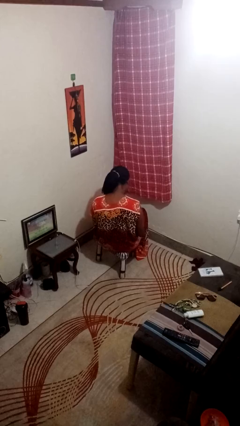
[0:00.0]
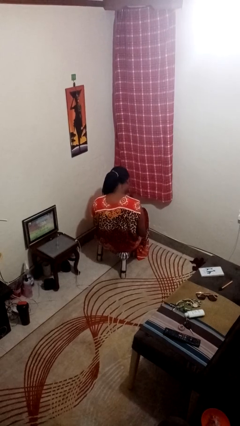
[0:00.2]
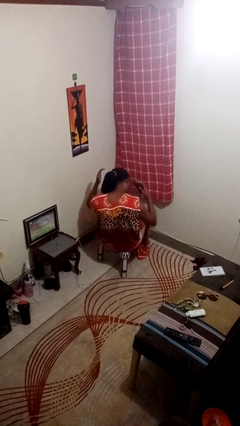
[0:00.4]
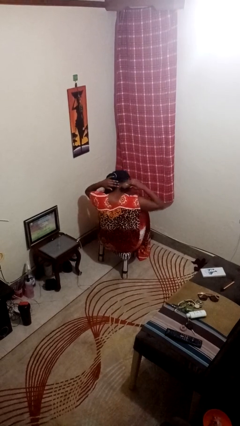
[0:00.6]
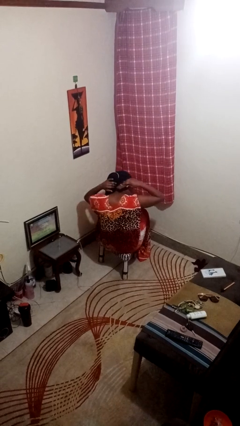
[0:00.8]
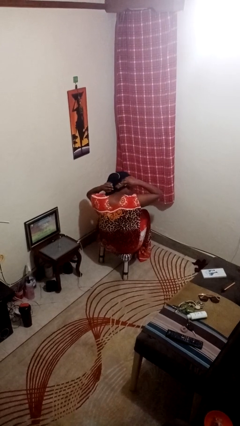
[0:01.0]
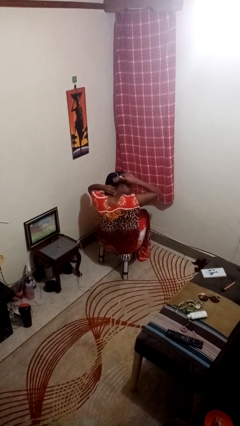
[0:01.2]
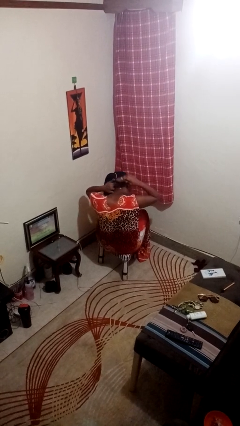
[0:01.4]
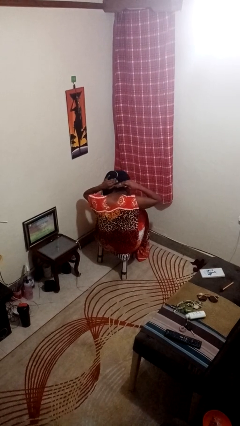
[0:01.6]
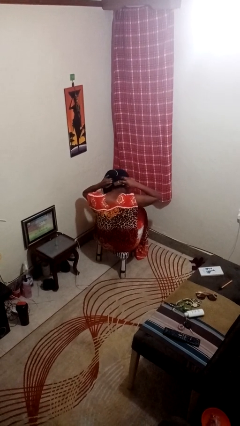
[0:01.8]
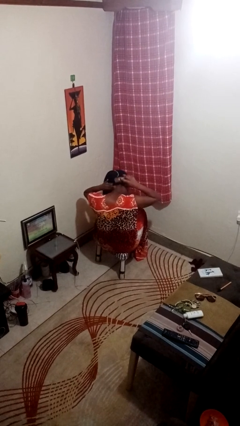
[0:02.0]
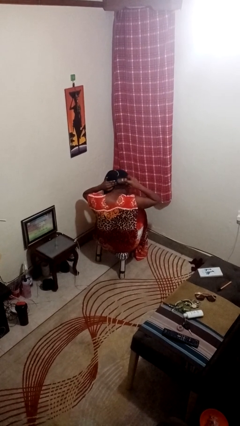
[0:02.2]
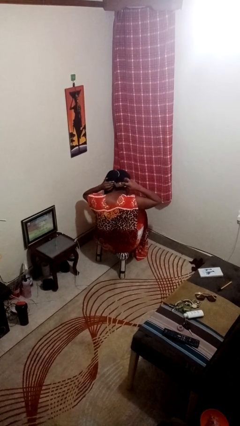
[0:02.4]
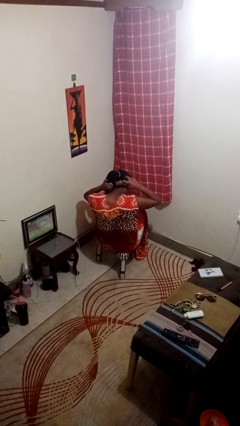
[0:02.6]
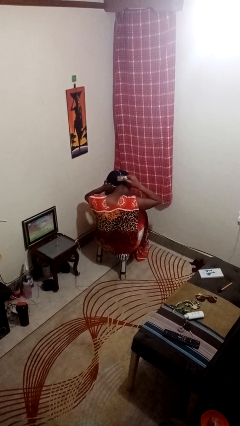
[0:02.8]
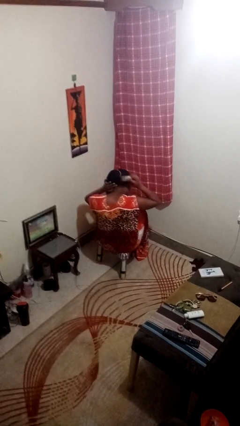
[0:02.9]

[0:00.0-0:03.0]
person brushes hair

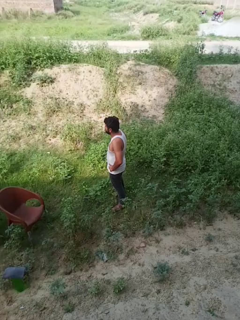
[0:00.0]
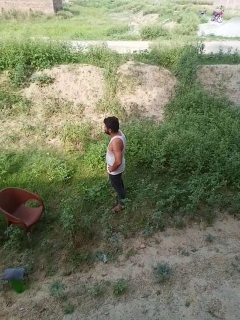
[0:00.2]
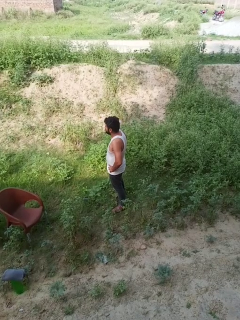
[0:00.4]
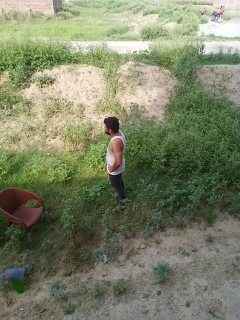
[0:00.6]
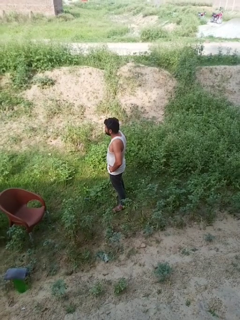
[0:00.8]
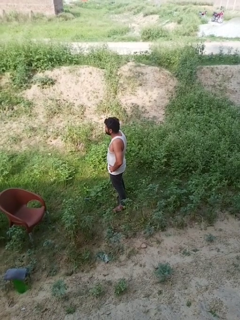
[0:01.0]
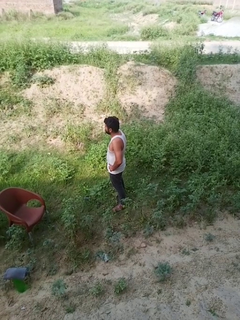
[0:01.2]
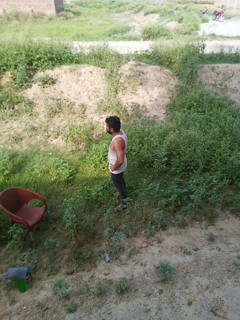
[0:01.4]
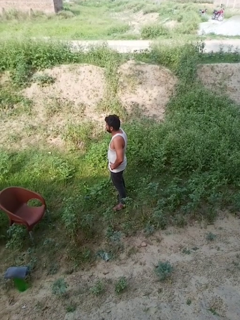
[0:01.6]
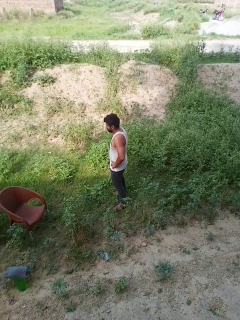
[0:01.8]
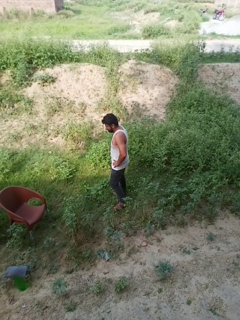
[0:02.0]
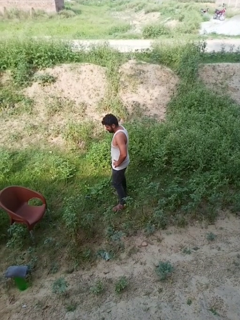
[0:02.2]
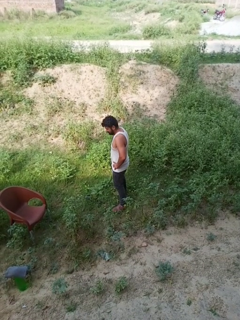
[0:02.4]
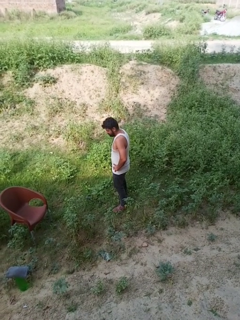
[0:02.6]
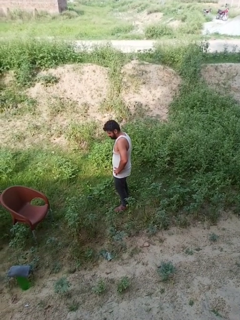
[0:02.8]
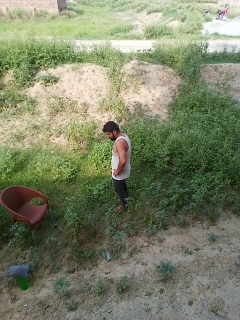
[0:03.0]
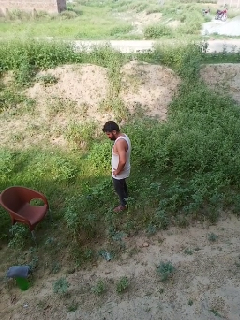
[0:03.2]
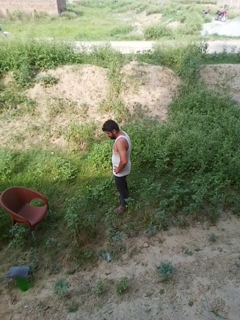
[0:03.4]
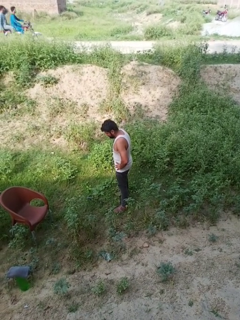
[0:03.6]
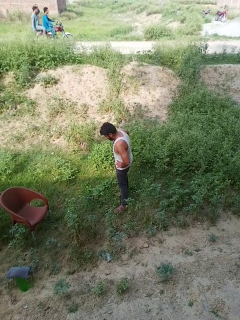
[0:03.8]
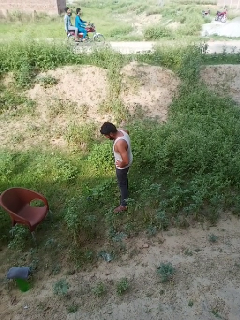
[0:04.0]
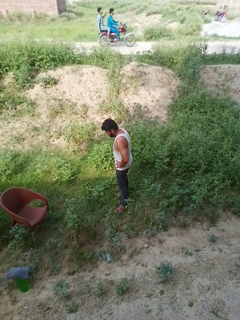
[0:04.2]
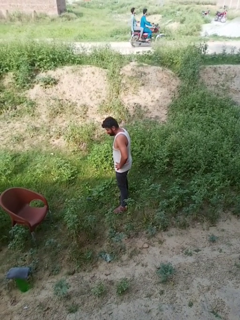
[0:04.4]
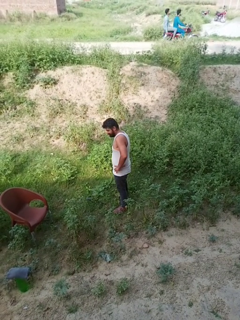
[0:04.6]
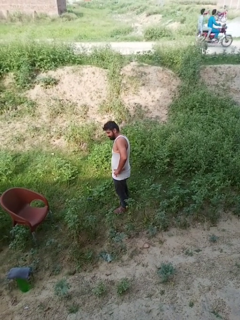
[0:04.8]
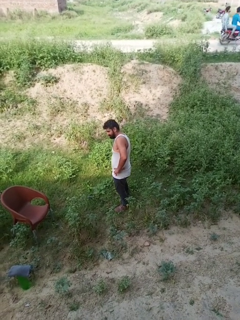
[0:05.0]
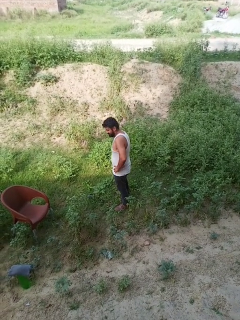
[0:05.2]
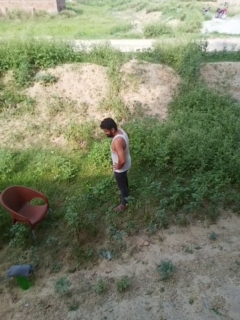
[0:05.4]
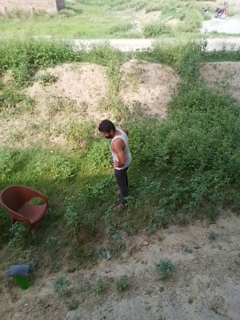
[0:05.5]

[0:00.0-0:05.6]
person wiggles hips

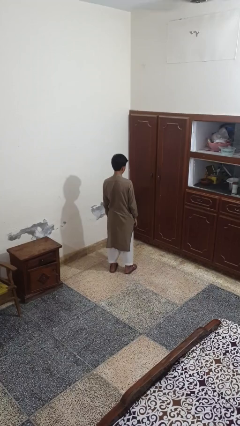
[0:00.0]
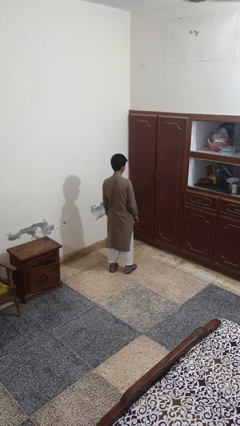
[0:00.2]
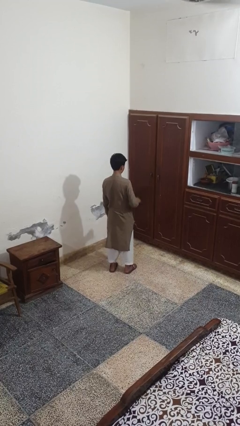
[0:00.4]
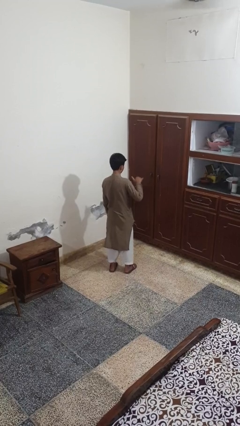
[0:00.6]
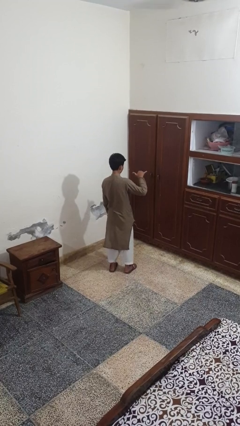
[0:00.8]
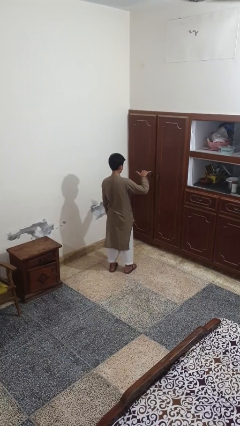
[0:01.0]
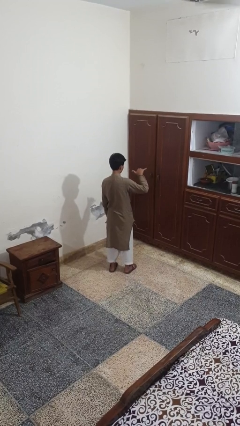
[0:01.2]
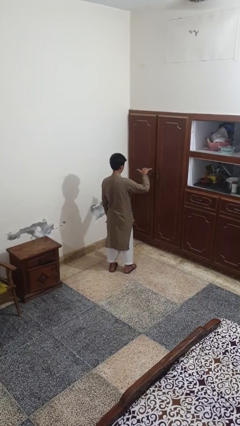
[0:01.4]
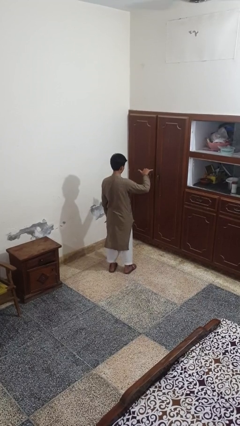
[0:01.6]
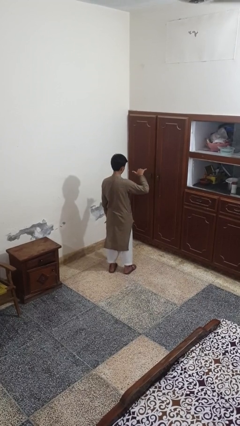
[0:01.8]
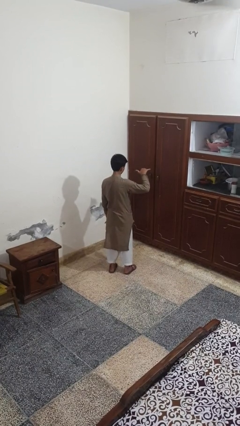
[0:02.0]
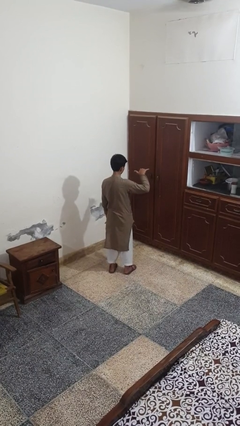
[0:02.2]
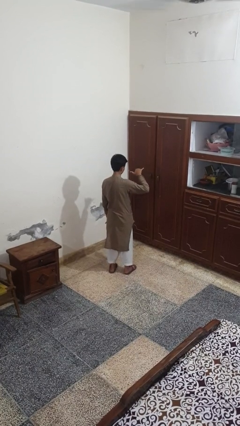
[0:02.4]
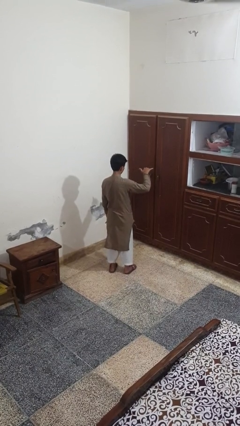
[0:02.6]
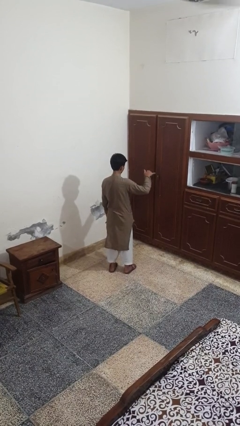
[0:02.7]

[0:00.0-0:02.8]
person gestures hang loose

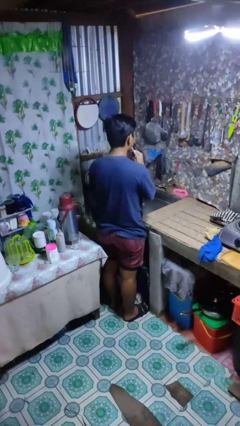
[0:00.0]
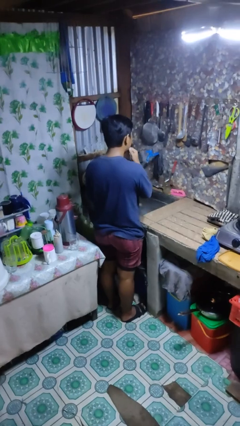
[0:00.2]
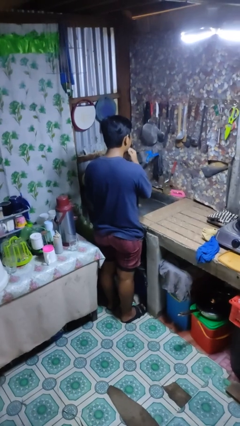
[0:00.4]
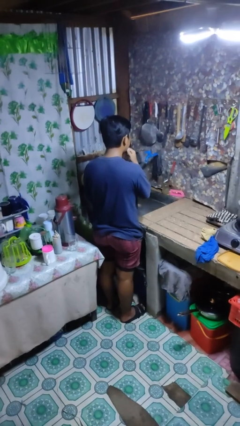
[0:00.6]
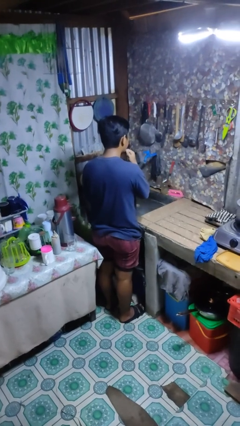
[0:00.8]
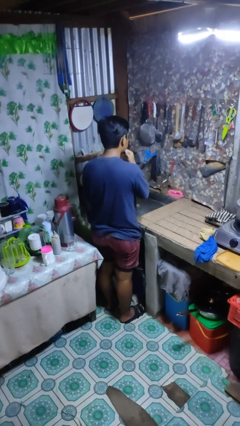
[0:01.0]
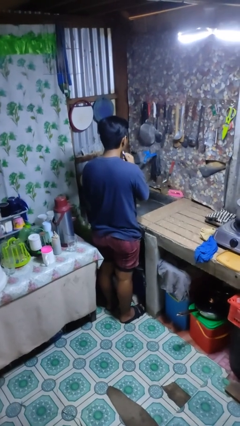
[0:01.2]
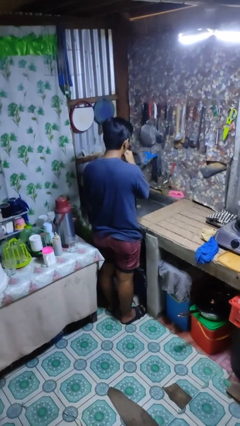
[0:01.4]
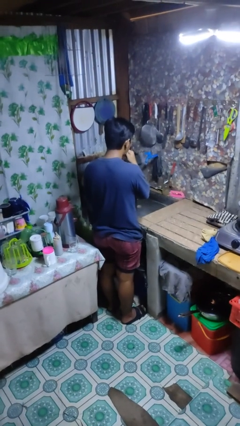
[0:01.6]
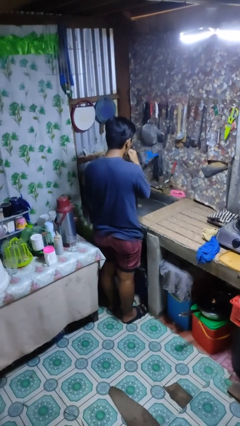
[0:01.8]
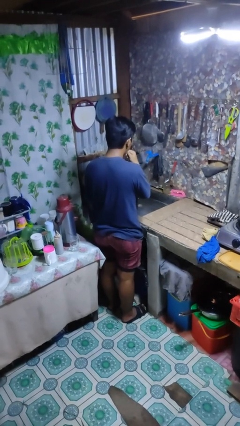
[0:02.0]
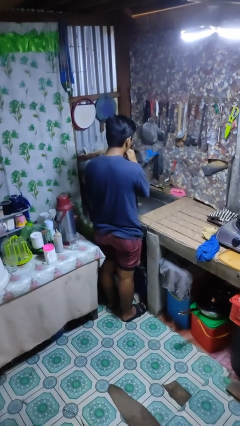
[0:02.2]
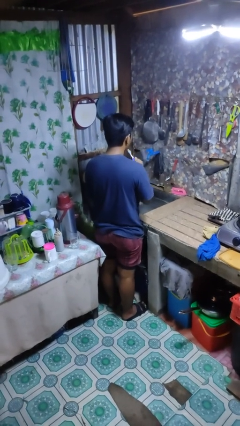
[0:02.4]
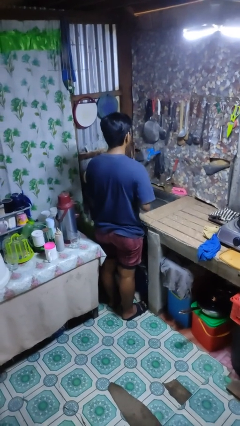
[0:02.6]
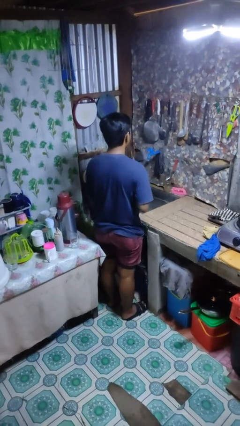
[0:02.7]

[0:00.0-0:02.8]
person brushes teeth

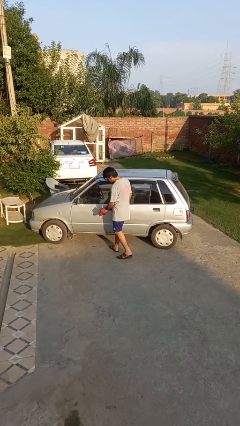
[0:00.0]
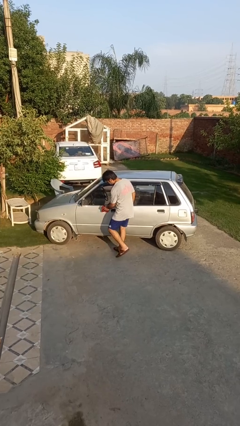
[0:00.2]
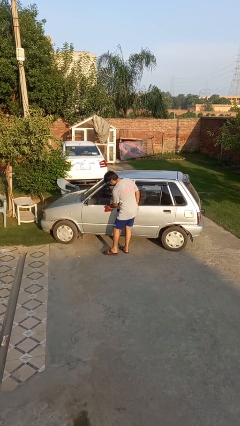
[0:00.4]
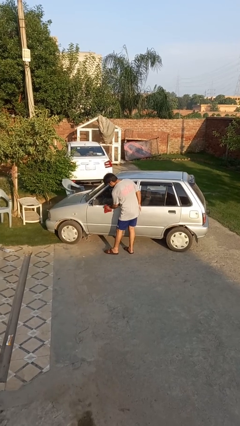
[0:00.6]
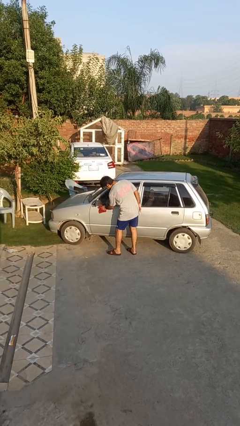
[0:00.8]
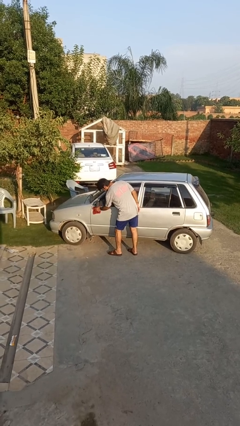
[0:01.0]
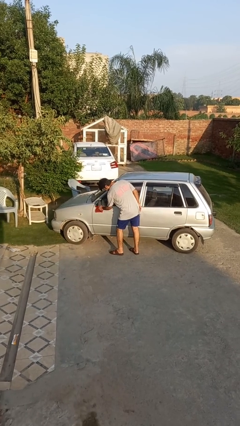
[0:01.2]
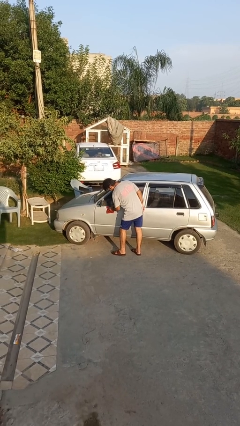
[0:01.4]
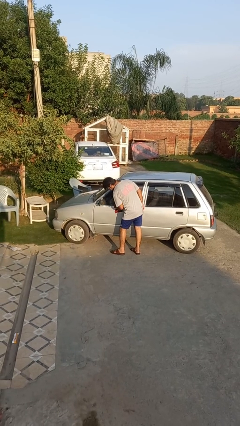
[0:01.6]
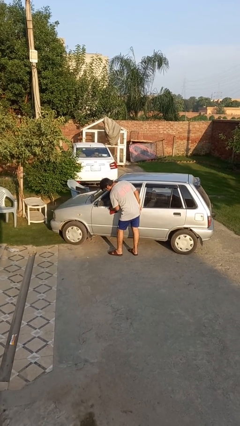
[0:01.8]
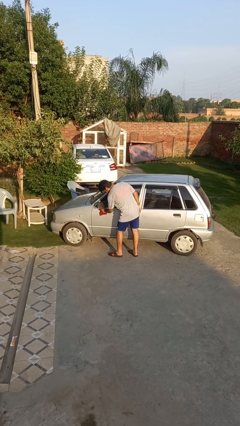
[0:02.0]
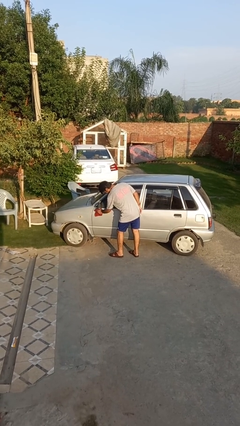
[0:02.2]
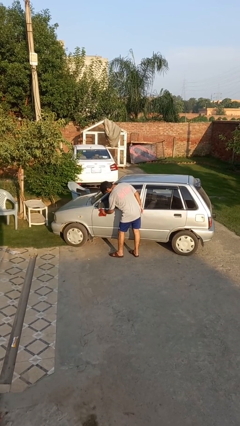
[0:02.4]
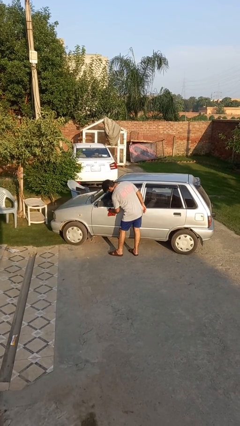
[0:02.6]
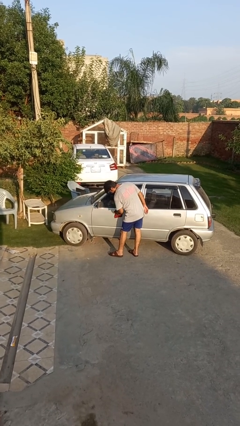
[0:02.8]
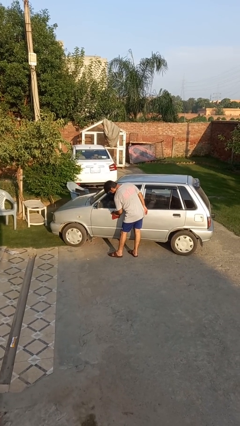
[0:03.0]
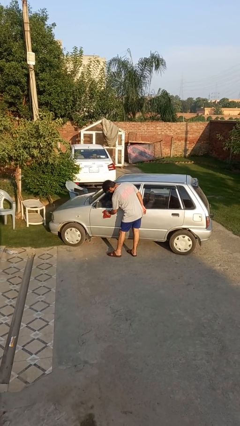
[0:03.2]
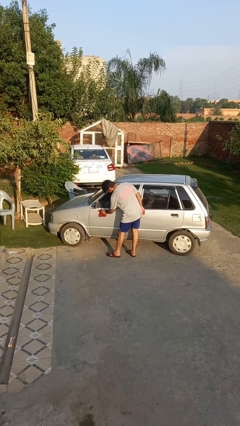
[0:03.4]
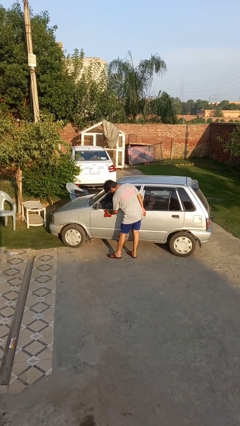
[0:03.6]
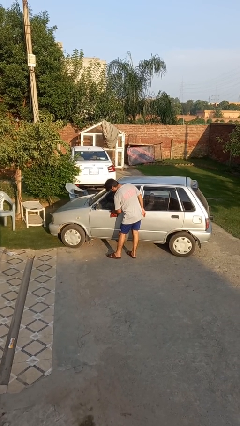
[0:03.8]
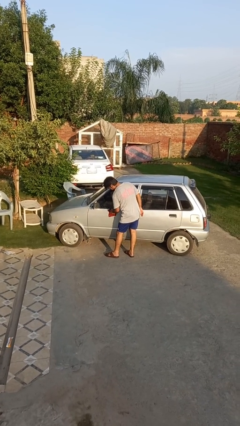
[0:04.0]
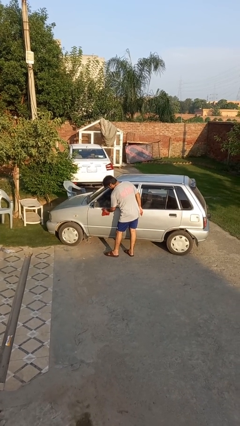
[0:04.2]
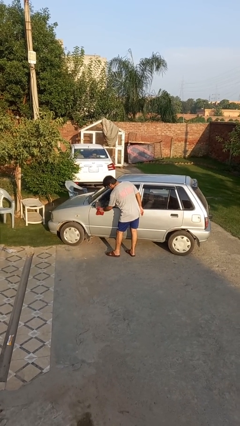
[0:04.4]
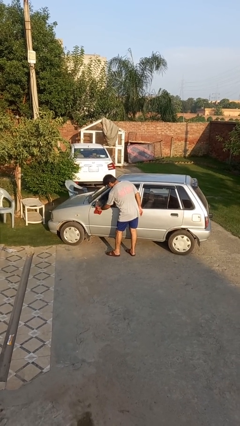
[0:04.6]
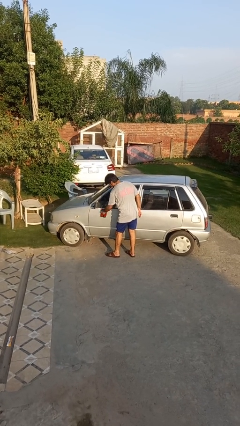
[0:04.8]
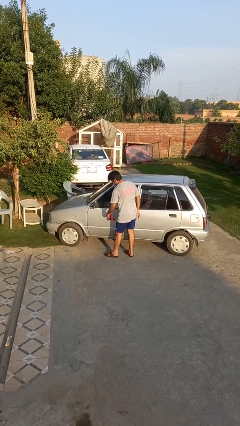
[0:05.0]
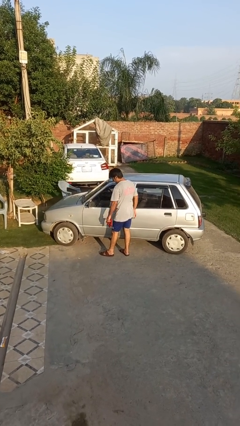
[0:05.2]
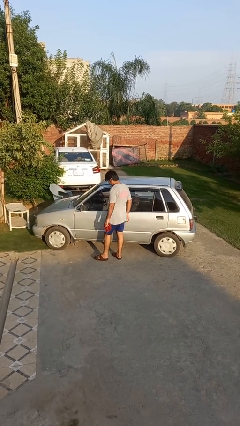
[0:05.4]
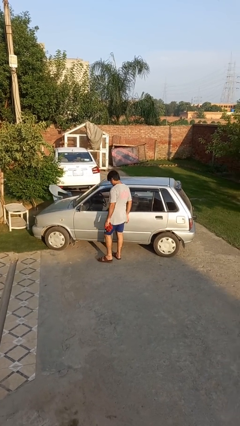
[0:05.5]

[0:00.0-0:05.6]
person polishes car with rag
